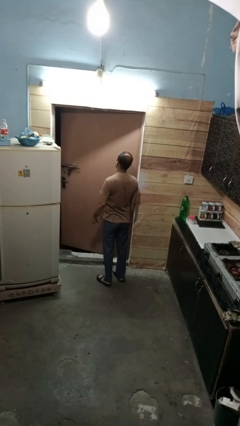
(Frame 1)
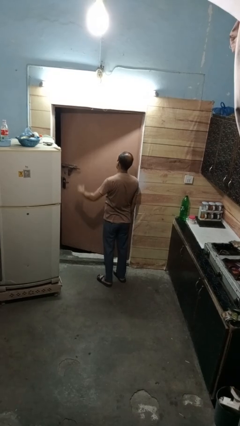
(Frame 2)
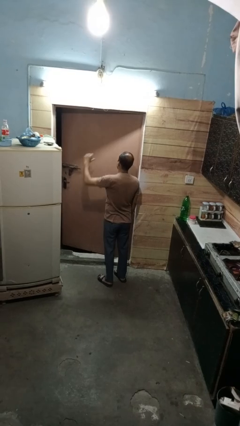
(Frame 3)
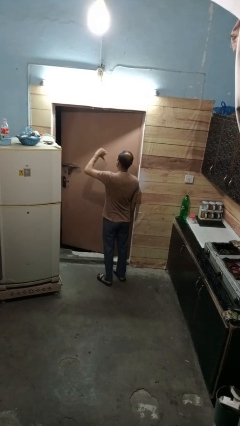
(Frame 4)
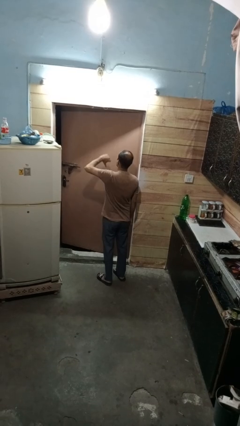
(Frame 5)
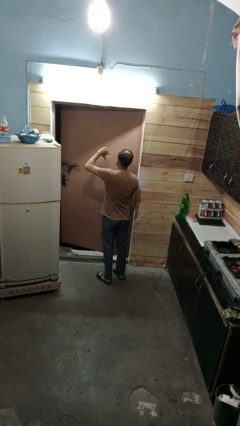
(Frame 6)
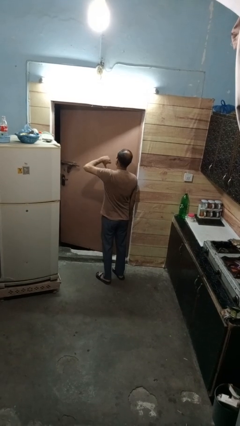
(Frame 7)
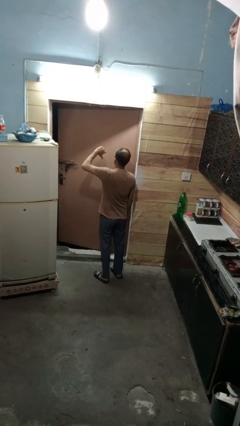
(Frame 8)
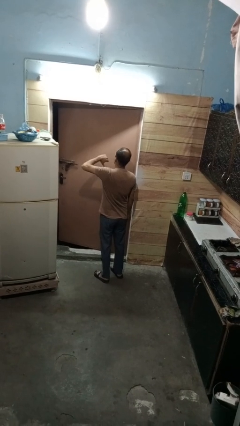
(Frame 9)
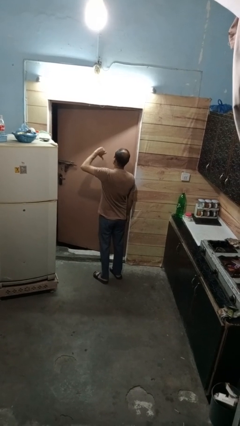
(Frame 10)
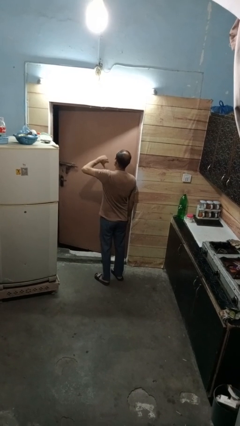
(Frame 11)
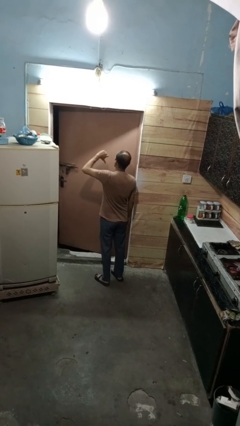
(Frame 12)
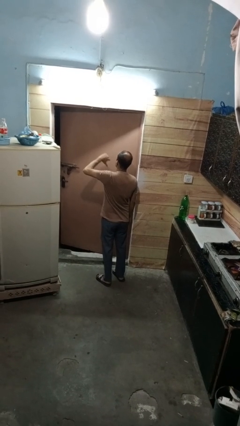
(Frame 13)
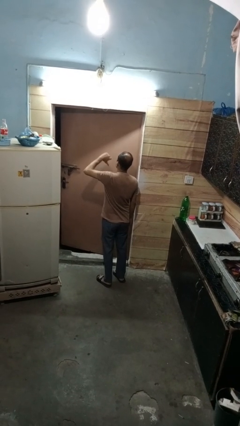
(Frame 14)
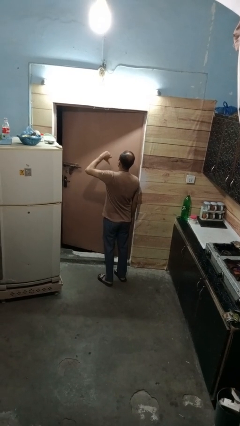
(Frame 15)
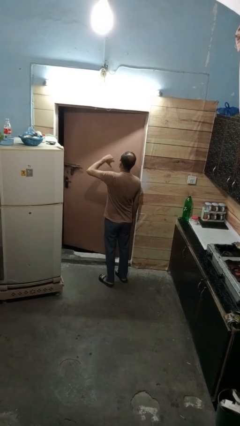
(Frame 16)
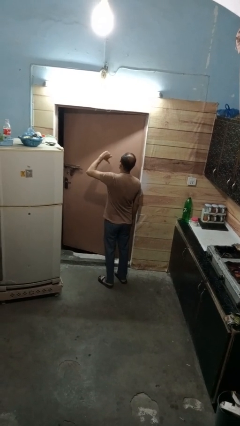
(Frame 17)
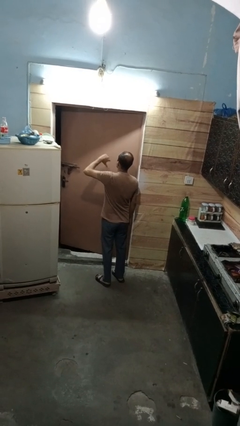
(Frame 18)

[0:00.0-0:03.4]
person gestures hang loose

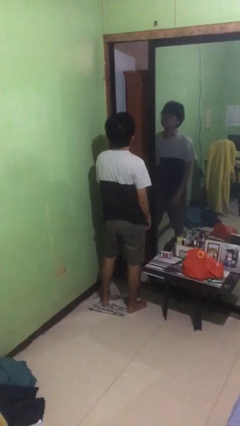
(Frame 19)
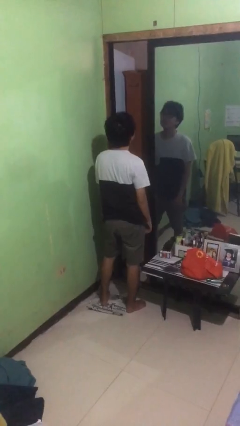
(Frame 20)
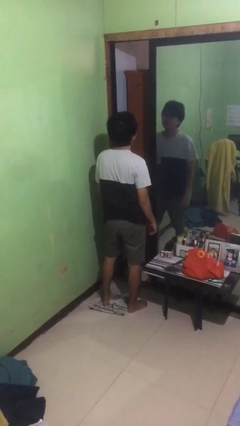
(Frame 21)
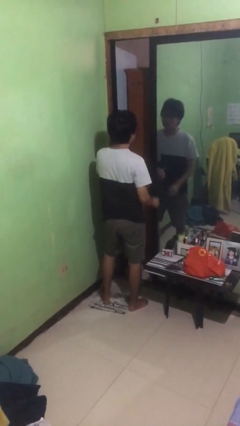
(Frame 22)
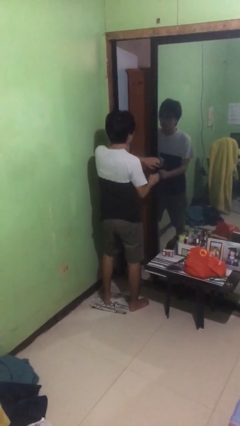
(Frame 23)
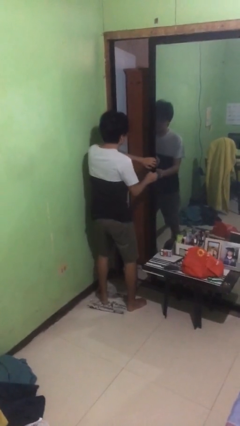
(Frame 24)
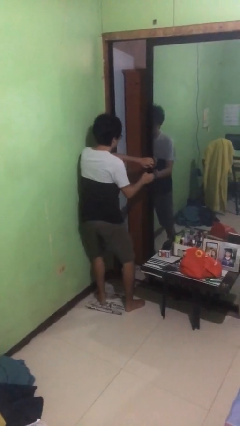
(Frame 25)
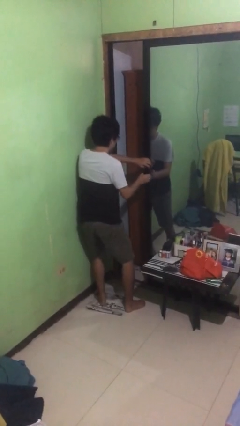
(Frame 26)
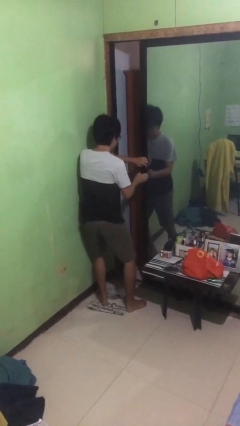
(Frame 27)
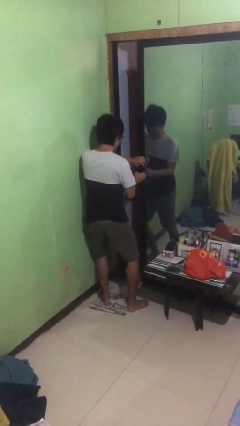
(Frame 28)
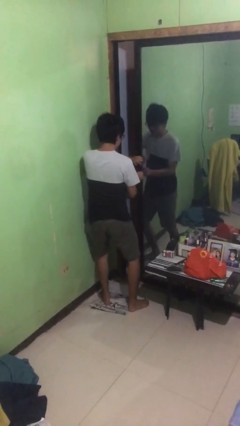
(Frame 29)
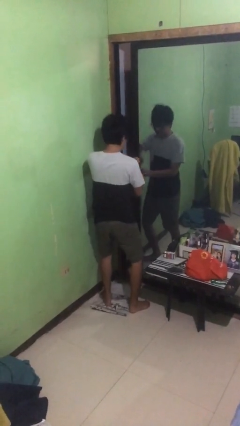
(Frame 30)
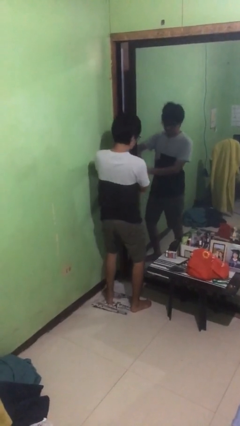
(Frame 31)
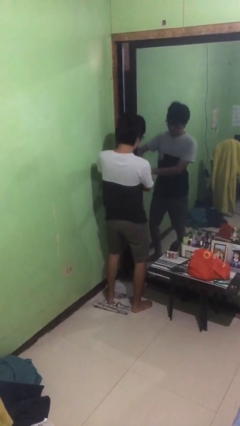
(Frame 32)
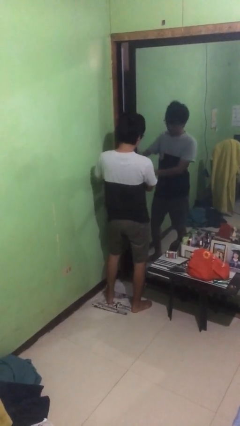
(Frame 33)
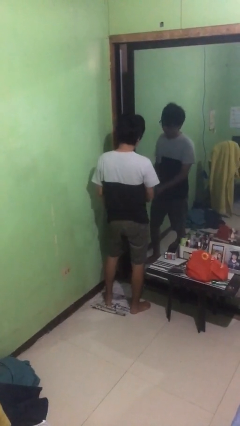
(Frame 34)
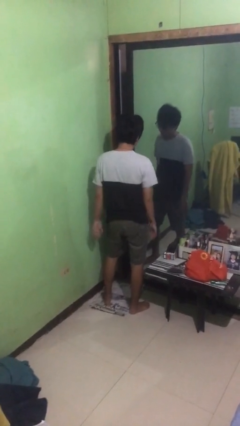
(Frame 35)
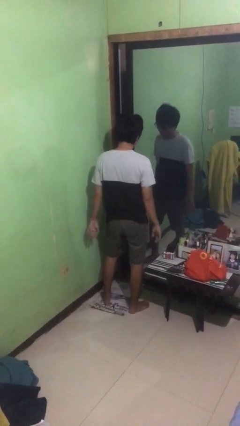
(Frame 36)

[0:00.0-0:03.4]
person closes sliding door

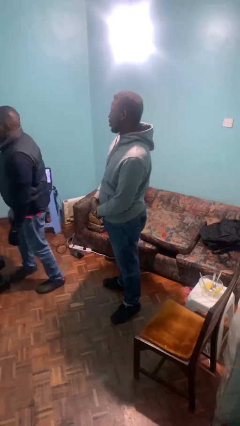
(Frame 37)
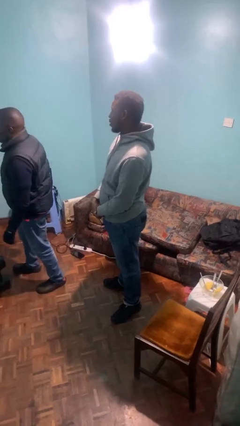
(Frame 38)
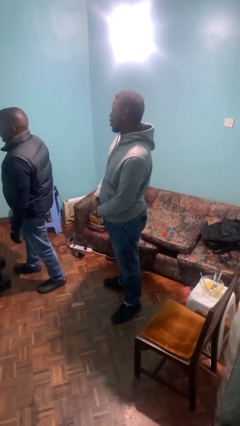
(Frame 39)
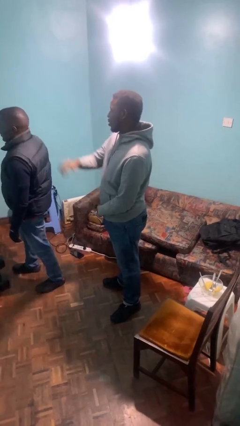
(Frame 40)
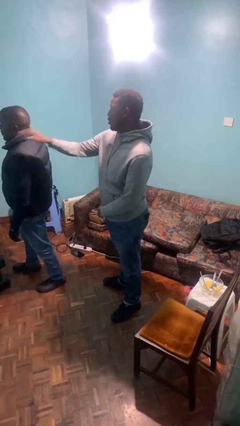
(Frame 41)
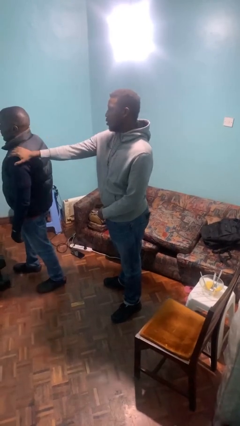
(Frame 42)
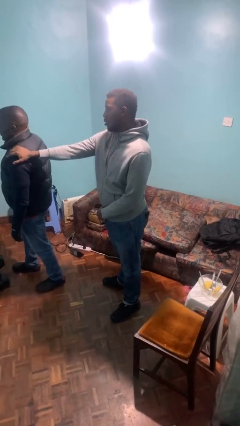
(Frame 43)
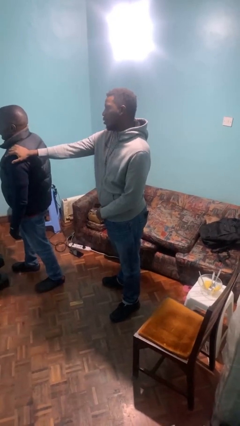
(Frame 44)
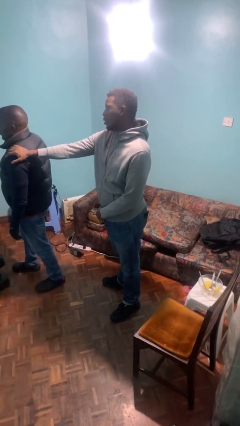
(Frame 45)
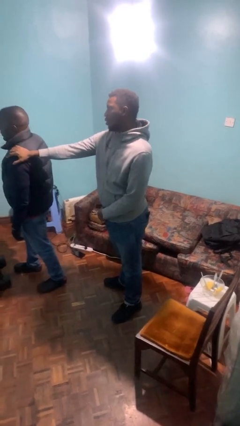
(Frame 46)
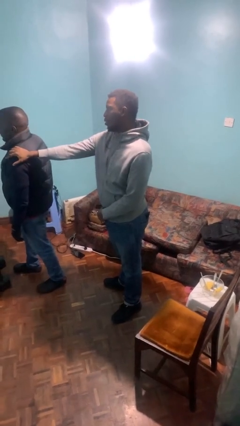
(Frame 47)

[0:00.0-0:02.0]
person grabs person by shoulder

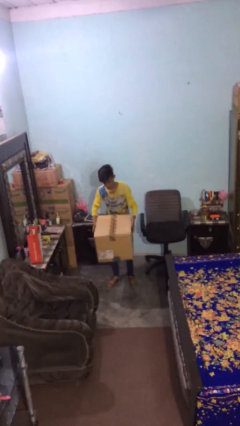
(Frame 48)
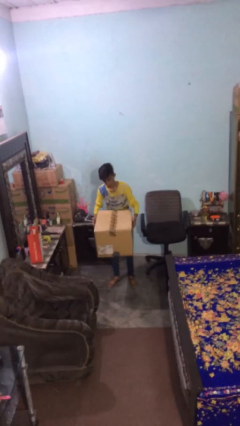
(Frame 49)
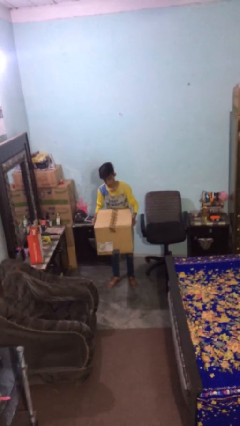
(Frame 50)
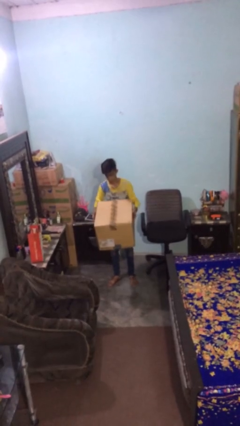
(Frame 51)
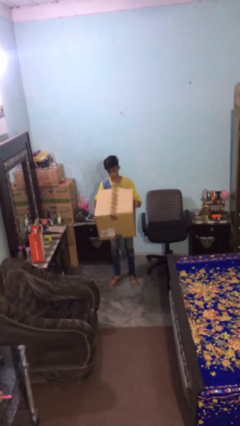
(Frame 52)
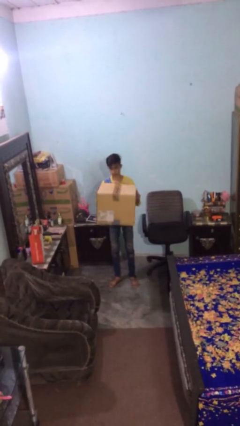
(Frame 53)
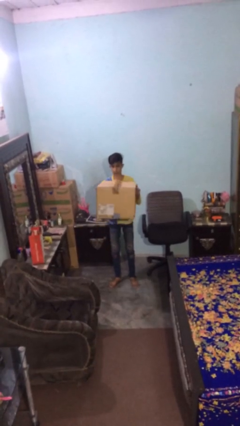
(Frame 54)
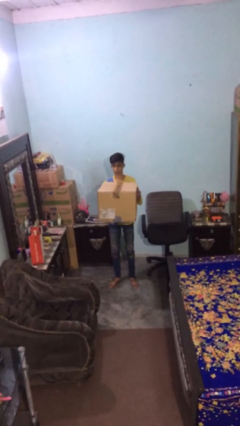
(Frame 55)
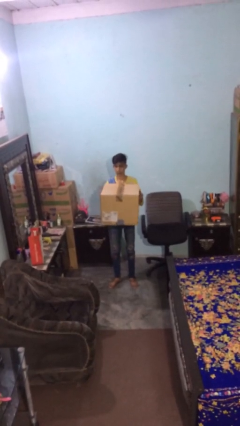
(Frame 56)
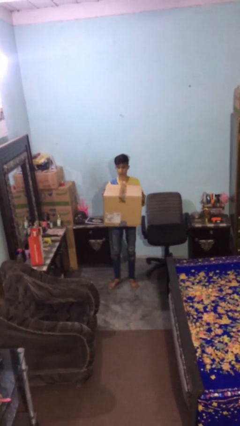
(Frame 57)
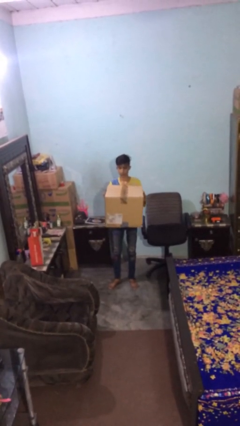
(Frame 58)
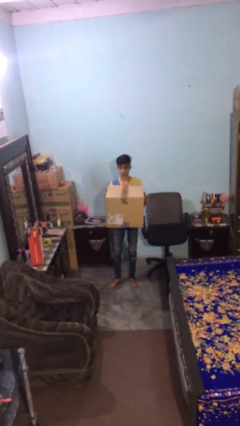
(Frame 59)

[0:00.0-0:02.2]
person carries heavy object

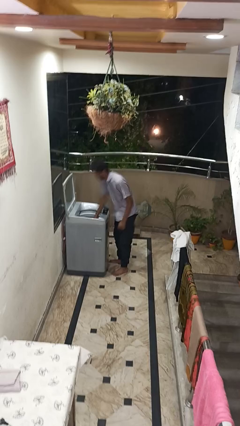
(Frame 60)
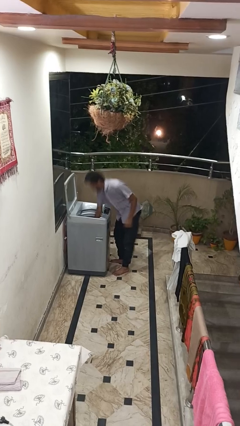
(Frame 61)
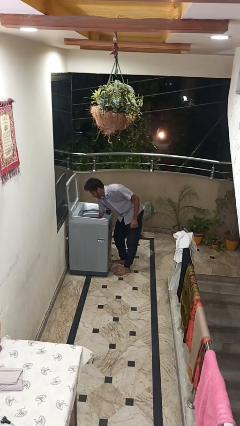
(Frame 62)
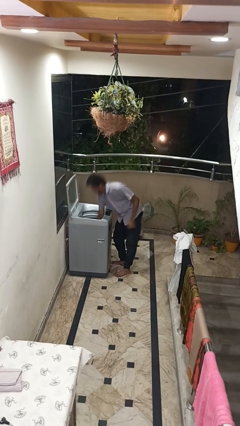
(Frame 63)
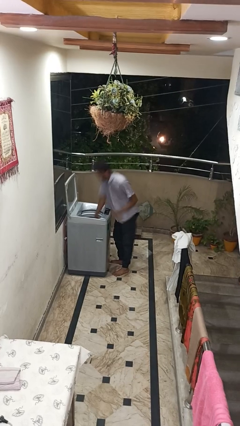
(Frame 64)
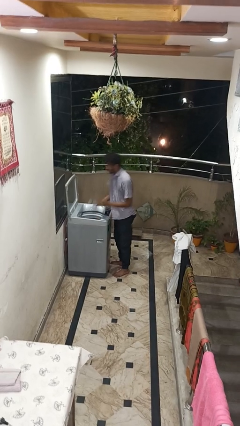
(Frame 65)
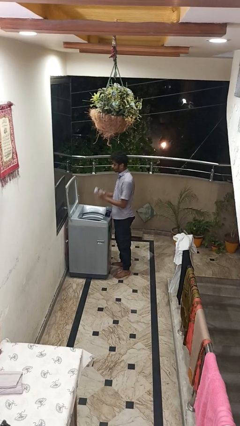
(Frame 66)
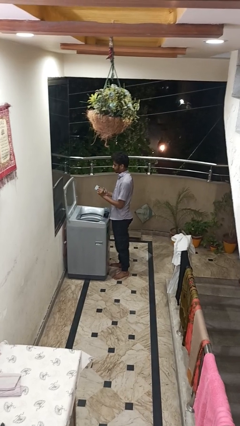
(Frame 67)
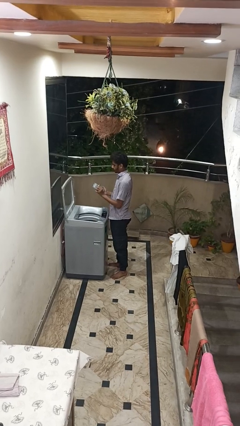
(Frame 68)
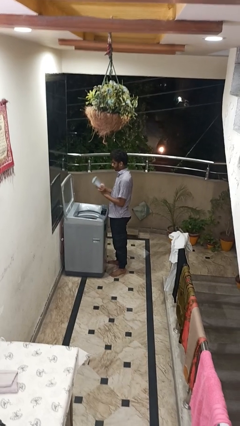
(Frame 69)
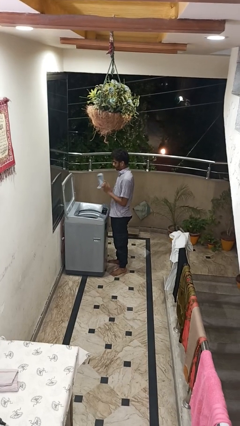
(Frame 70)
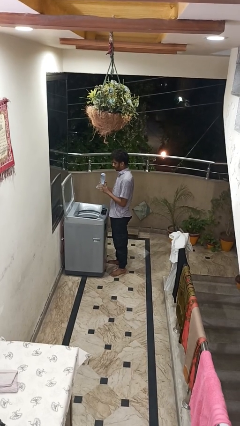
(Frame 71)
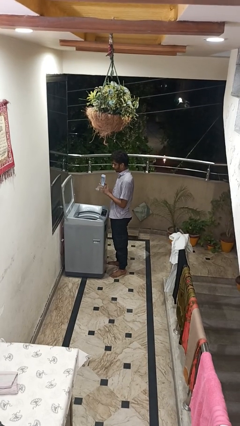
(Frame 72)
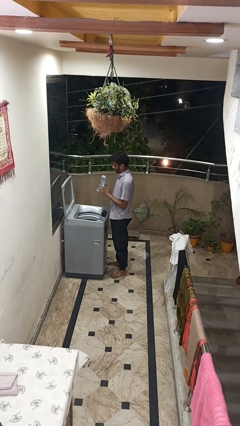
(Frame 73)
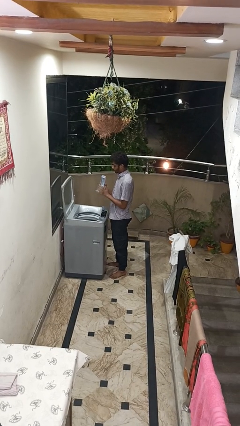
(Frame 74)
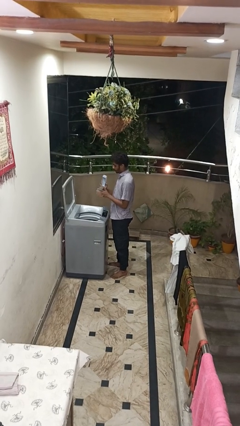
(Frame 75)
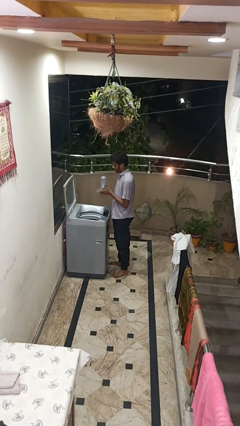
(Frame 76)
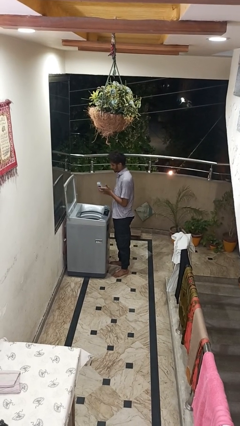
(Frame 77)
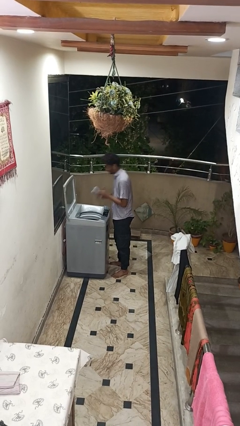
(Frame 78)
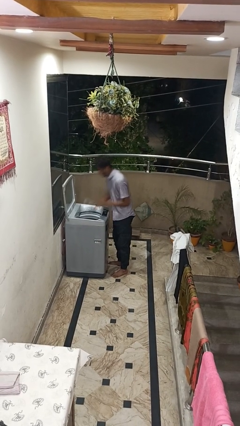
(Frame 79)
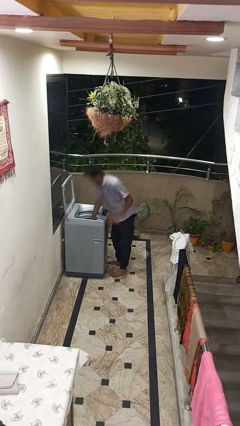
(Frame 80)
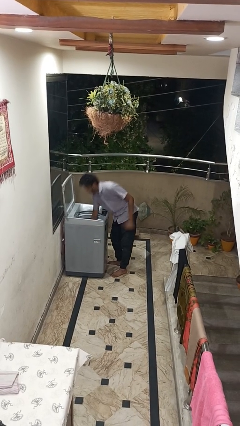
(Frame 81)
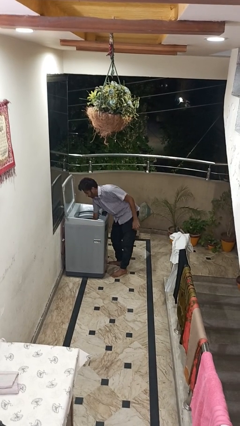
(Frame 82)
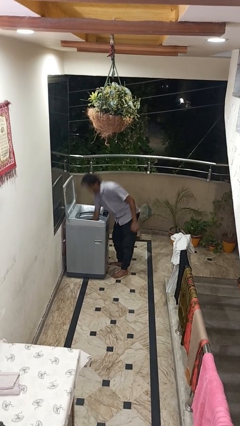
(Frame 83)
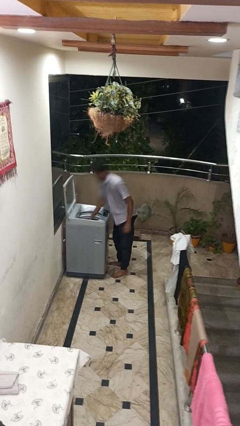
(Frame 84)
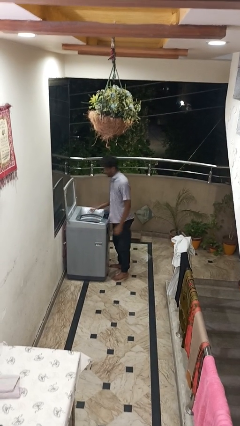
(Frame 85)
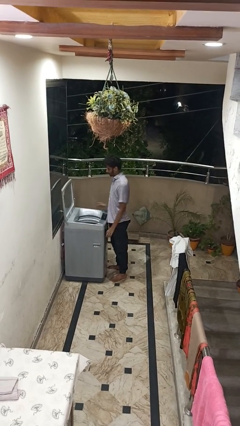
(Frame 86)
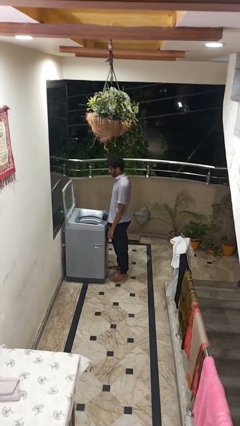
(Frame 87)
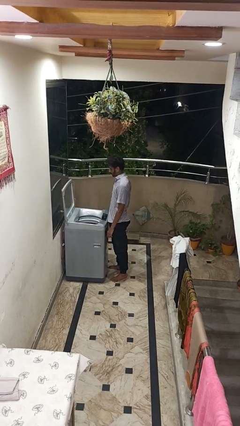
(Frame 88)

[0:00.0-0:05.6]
person cleans dryer lint trap

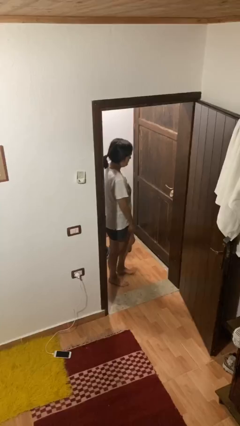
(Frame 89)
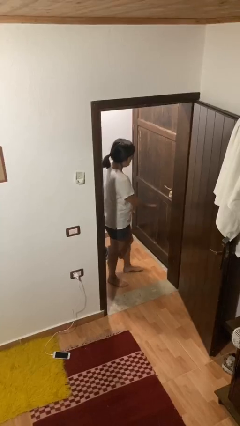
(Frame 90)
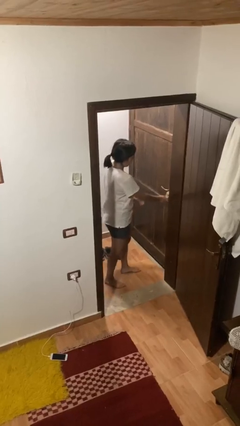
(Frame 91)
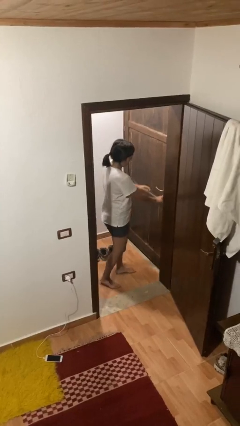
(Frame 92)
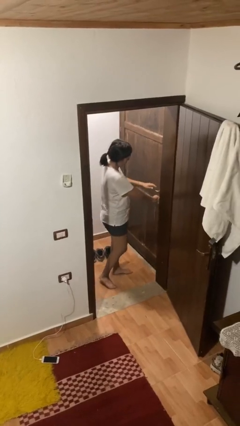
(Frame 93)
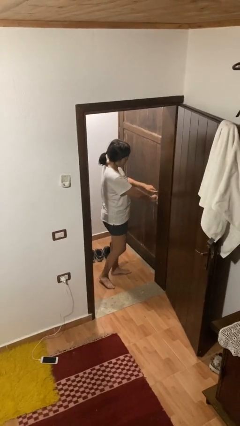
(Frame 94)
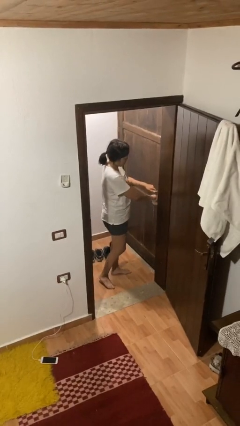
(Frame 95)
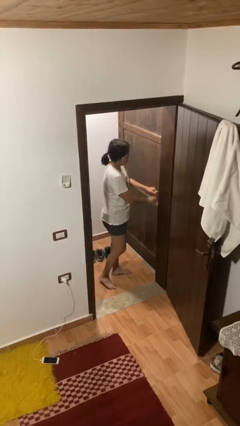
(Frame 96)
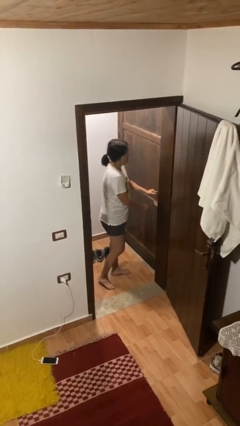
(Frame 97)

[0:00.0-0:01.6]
person unlocks door with keys
